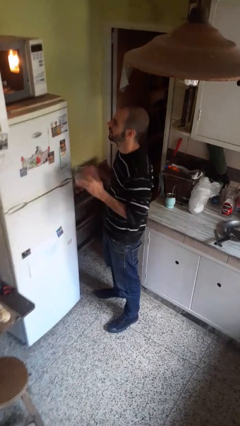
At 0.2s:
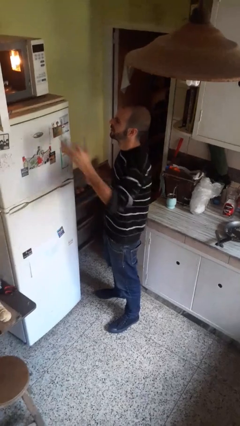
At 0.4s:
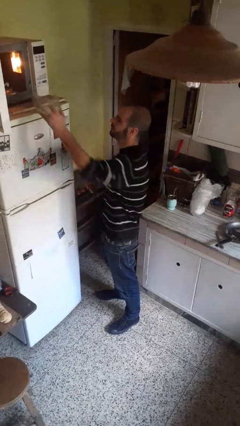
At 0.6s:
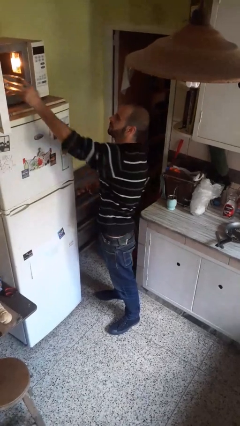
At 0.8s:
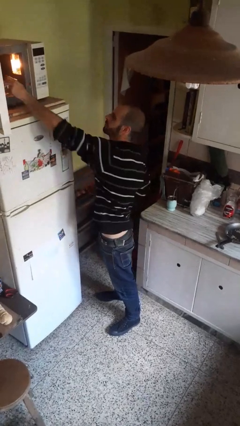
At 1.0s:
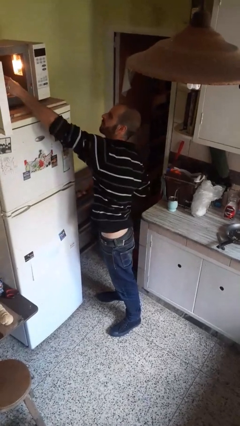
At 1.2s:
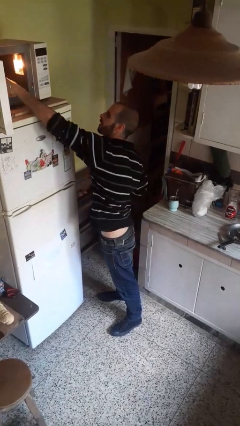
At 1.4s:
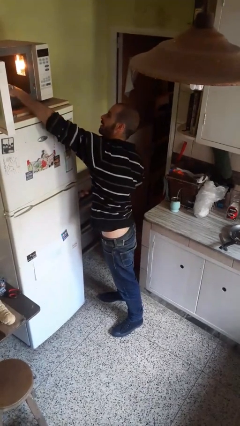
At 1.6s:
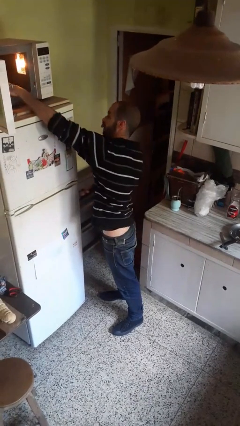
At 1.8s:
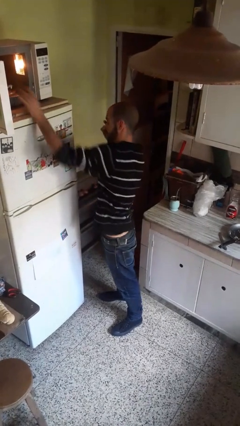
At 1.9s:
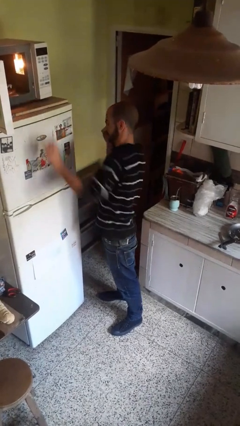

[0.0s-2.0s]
person puts object into microwave

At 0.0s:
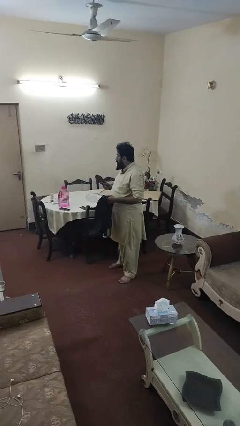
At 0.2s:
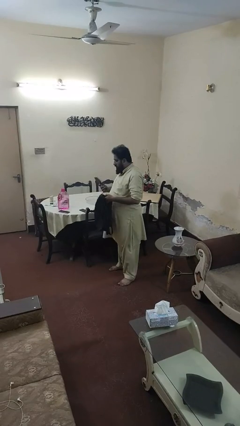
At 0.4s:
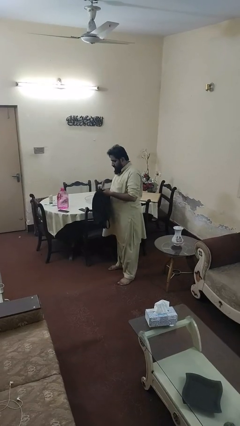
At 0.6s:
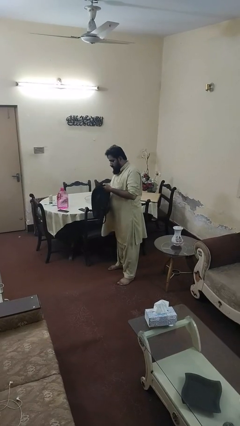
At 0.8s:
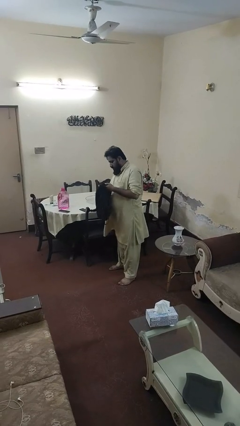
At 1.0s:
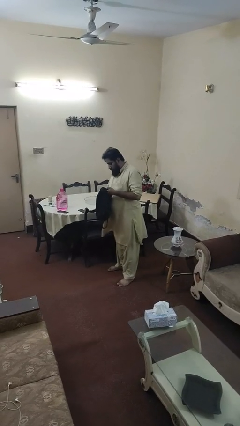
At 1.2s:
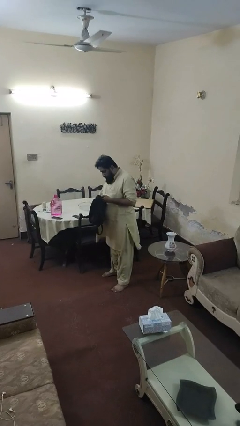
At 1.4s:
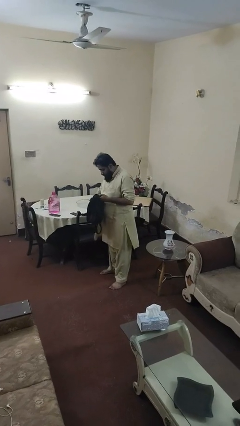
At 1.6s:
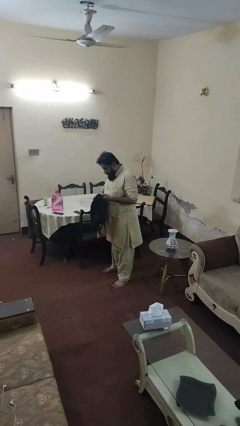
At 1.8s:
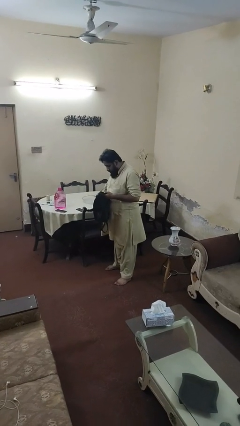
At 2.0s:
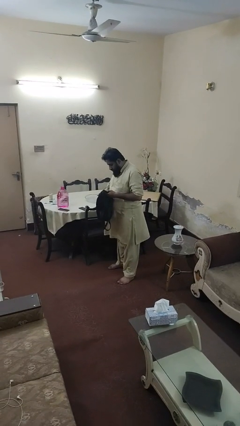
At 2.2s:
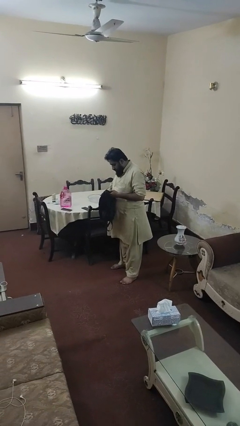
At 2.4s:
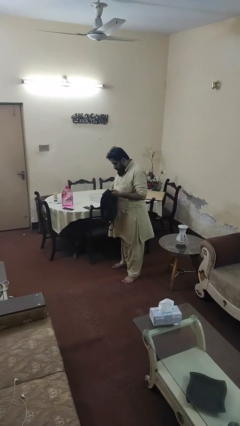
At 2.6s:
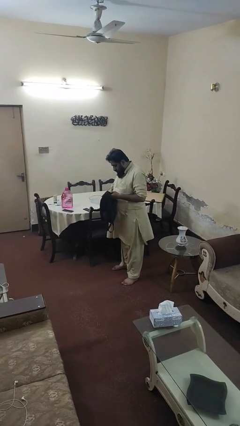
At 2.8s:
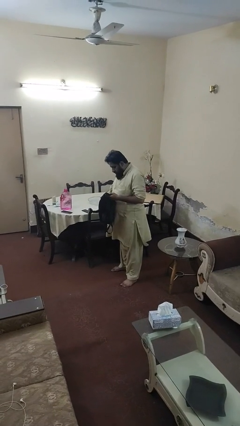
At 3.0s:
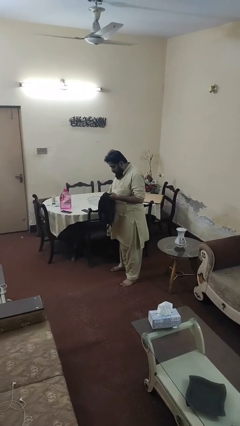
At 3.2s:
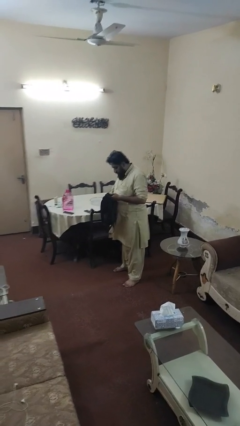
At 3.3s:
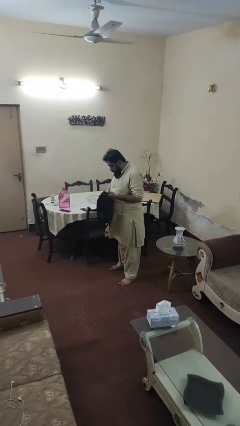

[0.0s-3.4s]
person puts object into backpack

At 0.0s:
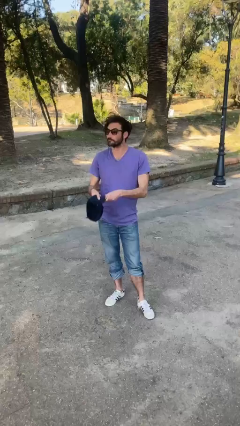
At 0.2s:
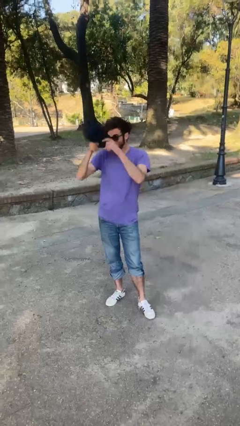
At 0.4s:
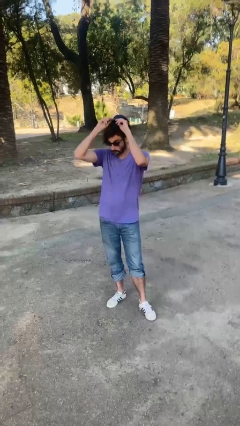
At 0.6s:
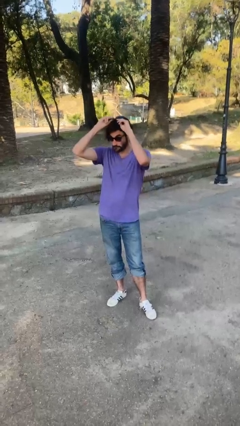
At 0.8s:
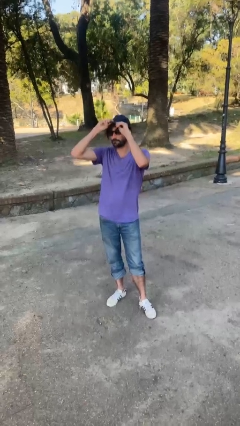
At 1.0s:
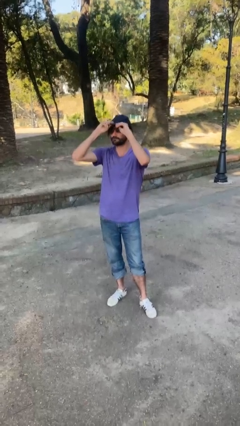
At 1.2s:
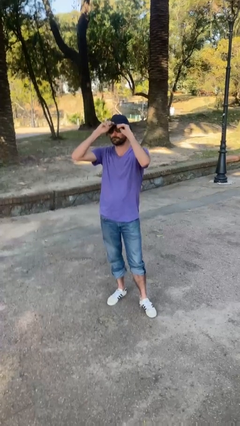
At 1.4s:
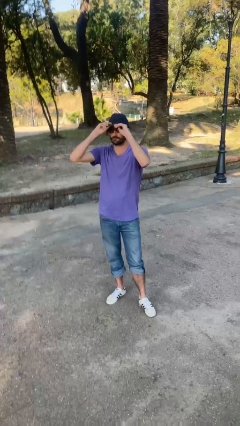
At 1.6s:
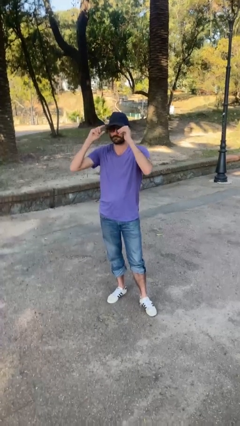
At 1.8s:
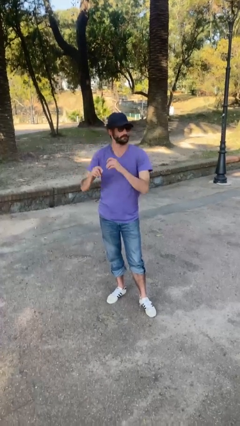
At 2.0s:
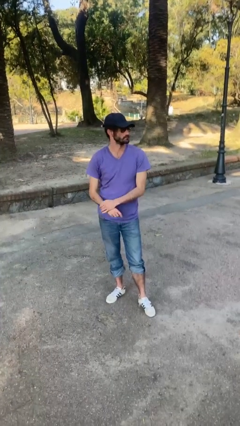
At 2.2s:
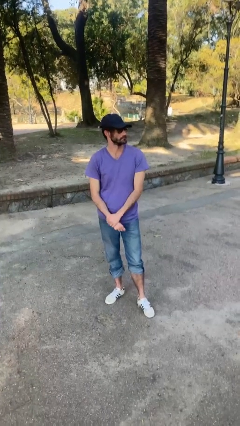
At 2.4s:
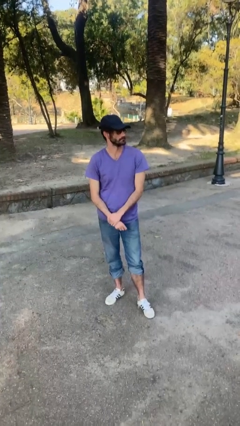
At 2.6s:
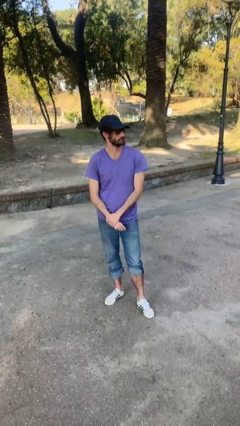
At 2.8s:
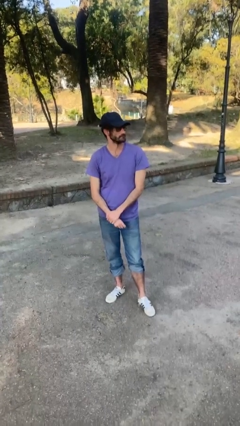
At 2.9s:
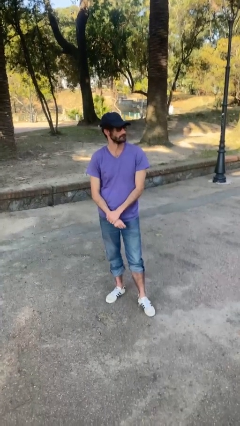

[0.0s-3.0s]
person puts on hat

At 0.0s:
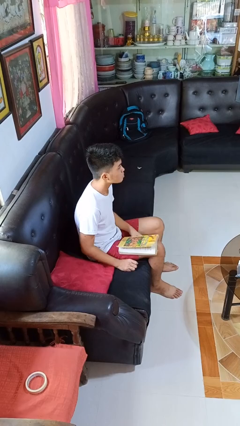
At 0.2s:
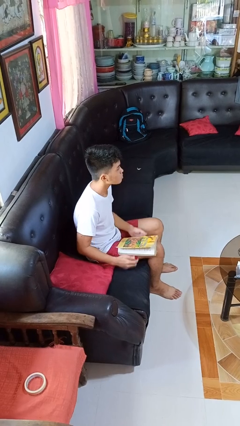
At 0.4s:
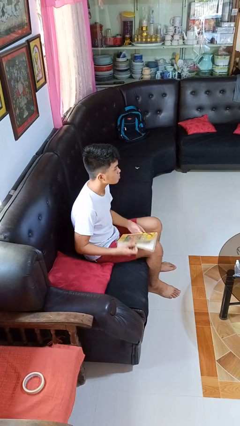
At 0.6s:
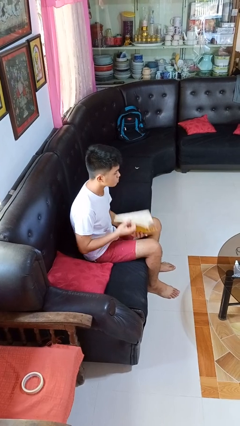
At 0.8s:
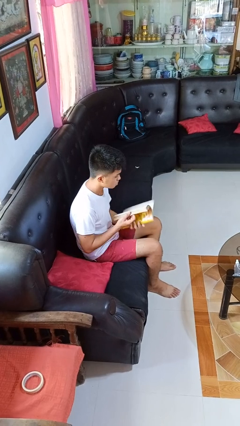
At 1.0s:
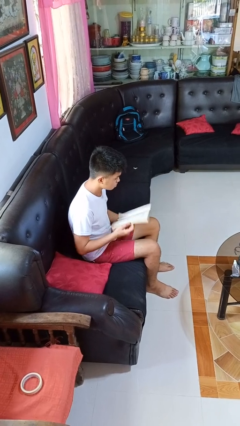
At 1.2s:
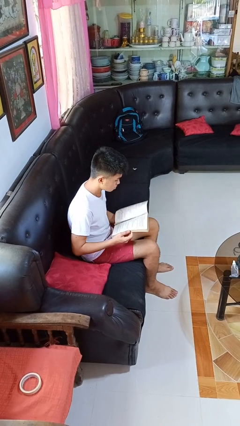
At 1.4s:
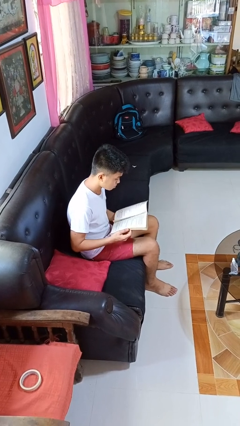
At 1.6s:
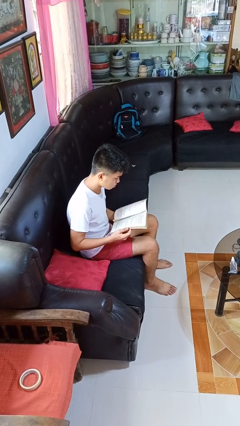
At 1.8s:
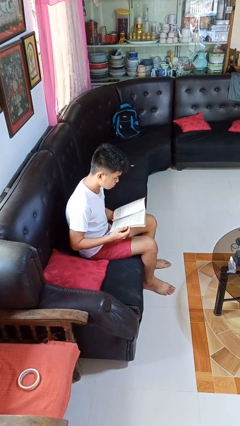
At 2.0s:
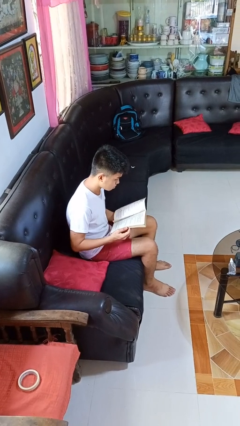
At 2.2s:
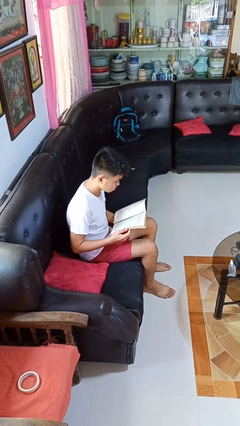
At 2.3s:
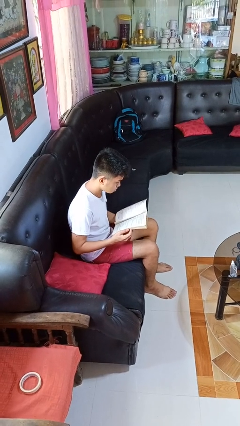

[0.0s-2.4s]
person reads book

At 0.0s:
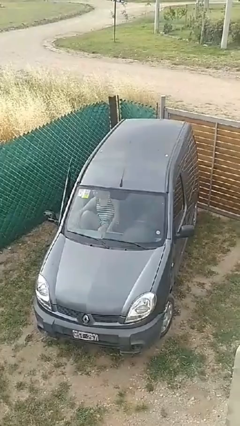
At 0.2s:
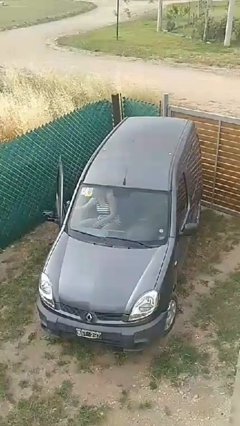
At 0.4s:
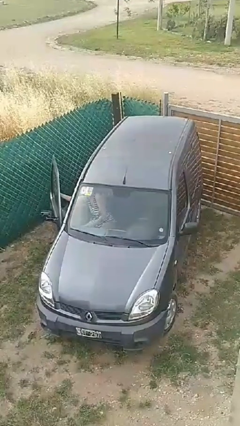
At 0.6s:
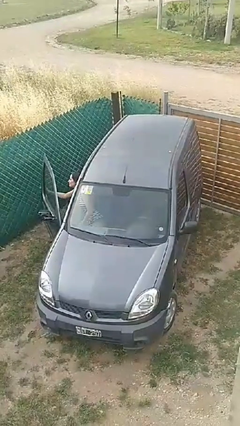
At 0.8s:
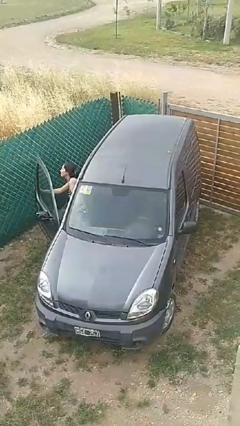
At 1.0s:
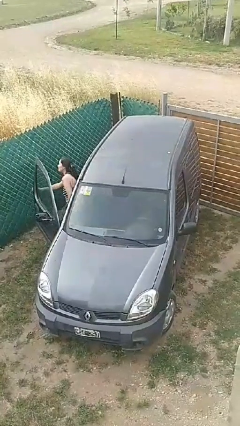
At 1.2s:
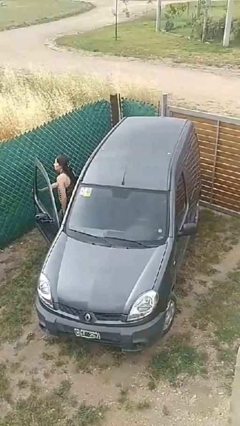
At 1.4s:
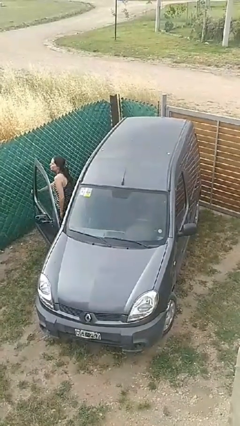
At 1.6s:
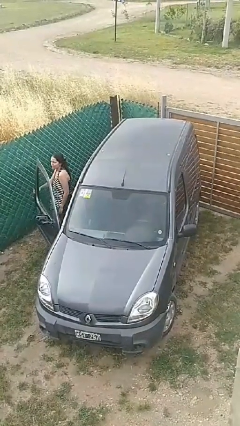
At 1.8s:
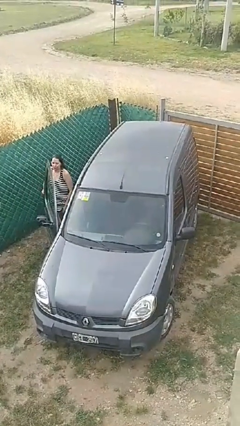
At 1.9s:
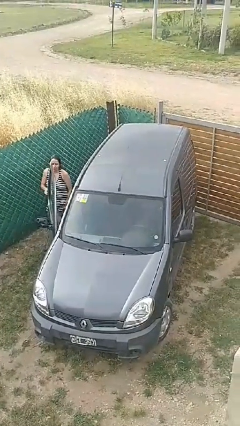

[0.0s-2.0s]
car drops off person

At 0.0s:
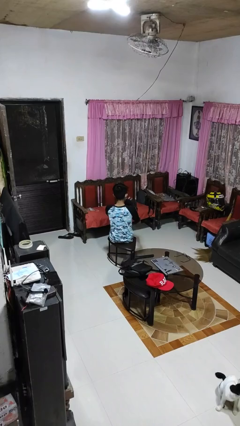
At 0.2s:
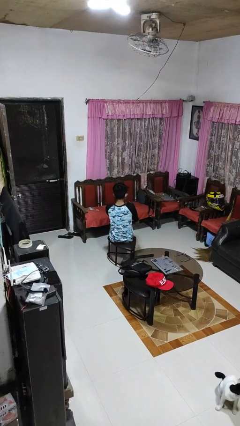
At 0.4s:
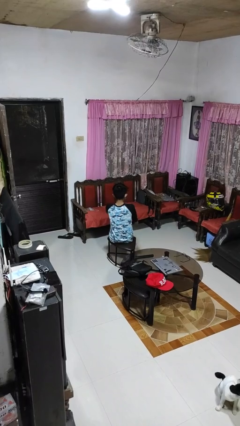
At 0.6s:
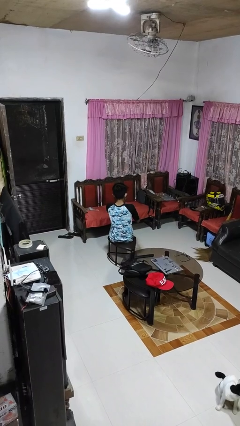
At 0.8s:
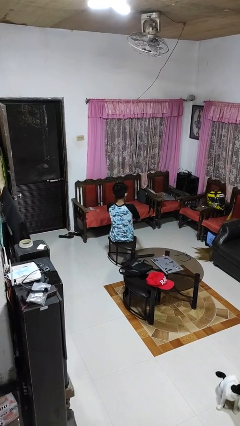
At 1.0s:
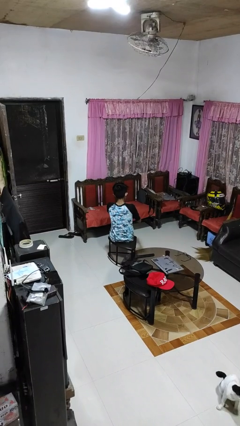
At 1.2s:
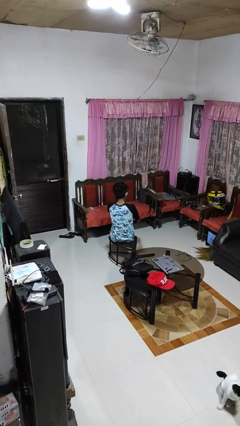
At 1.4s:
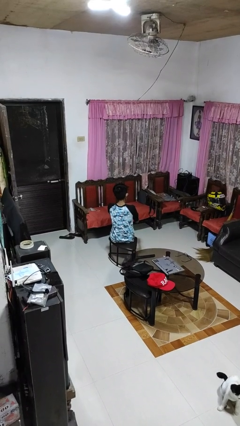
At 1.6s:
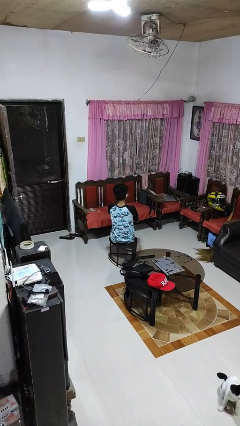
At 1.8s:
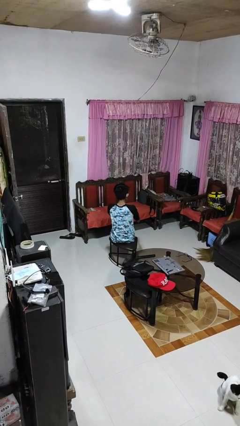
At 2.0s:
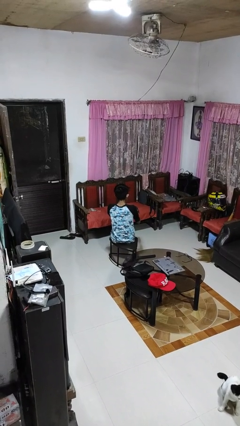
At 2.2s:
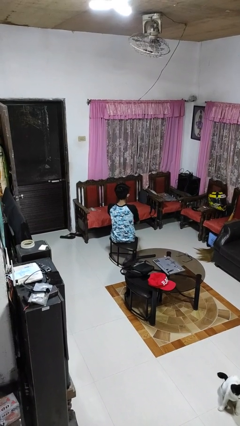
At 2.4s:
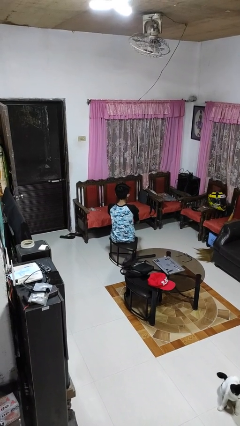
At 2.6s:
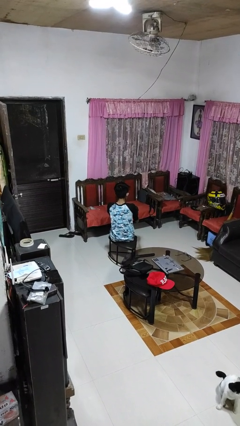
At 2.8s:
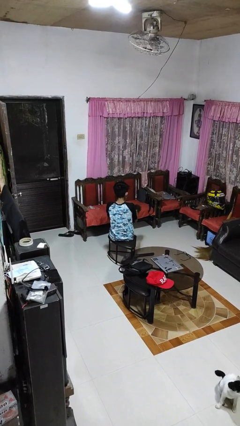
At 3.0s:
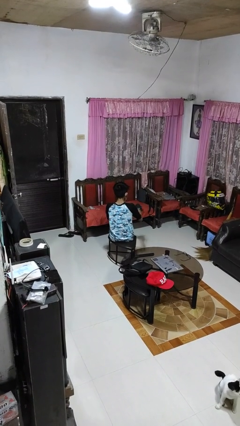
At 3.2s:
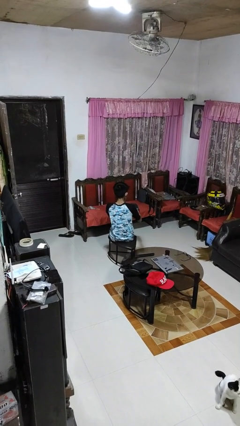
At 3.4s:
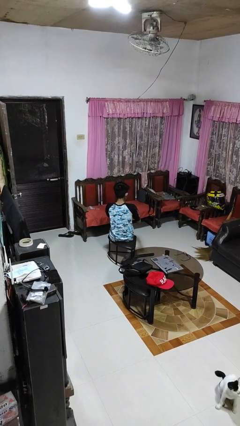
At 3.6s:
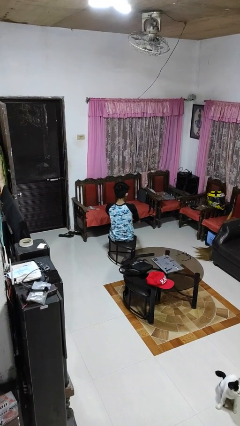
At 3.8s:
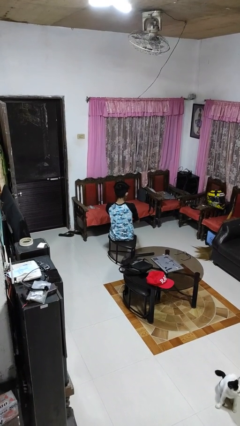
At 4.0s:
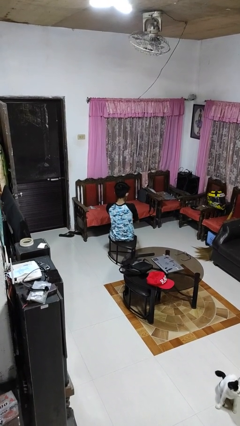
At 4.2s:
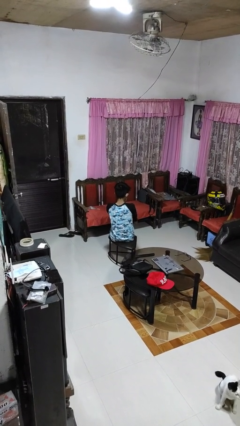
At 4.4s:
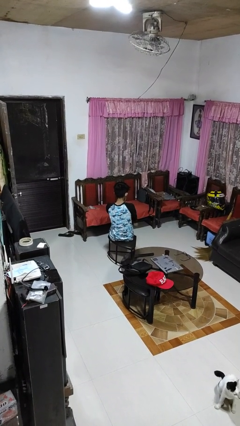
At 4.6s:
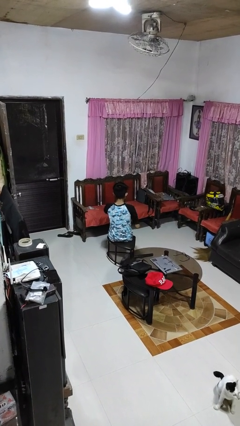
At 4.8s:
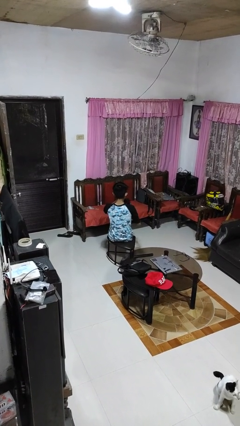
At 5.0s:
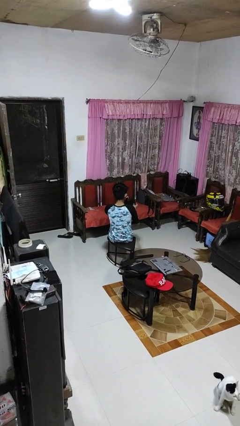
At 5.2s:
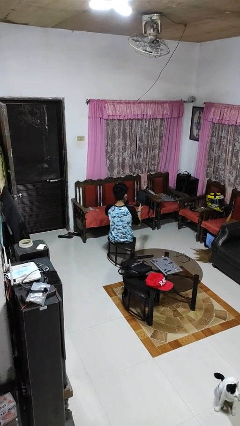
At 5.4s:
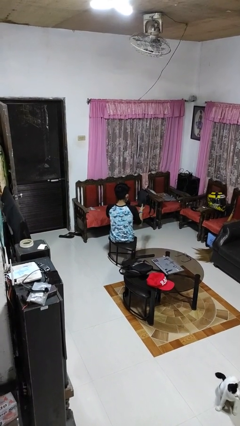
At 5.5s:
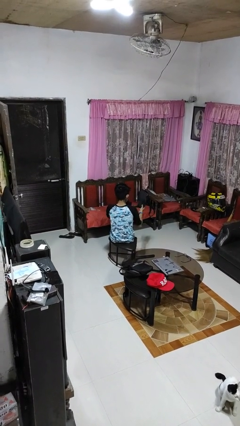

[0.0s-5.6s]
person takes off gloves
